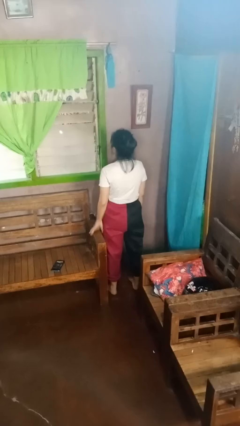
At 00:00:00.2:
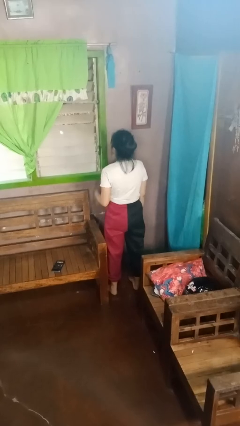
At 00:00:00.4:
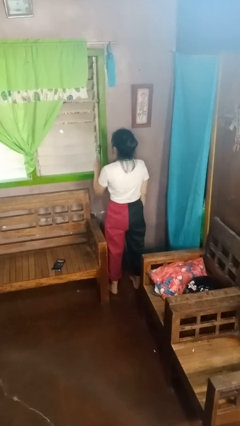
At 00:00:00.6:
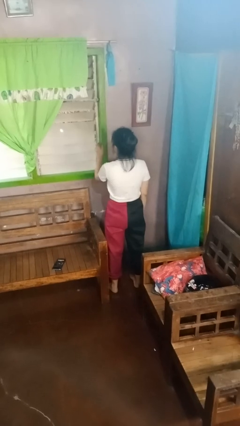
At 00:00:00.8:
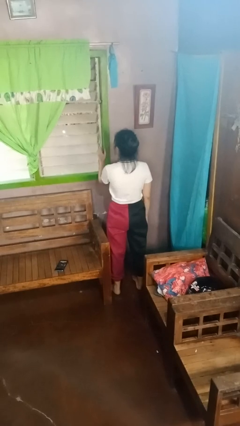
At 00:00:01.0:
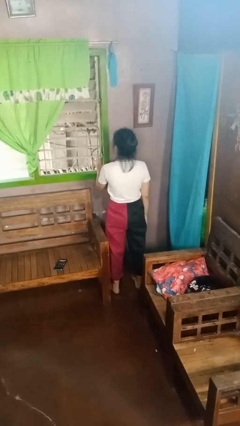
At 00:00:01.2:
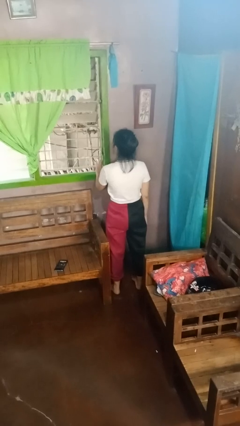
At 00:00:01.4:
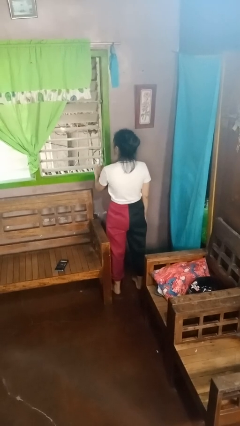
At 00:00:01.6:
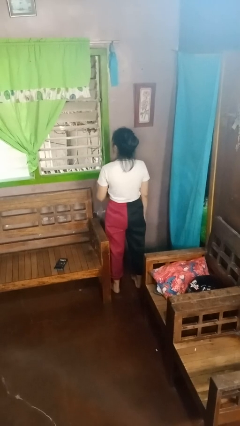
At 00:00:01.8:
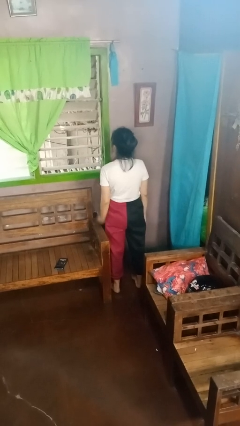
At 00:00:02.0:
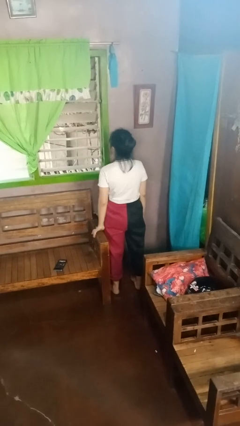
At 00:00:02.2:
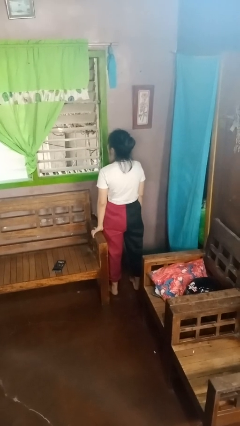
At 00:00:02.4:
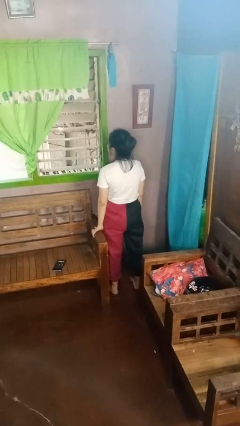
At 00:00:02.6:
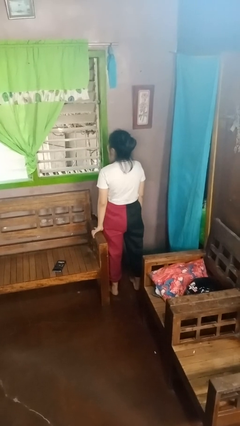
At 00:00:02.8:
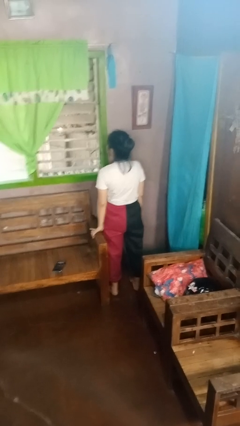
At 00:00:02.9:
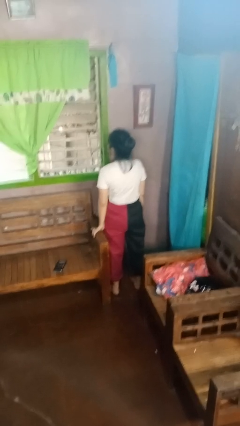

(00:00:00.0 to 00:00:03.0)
person opens home window

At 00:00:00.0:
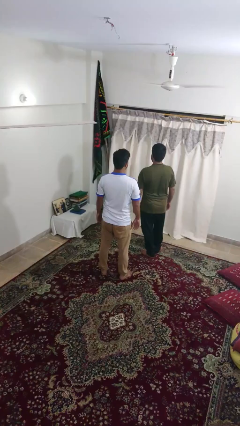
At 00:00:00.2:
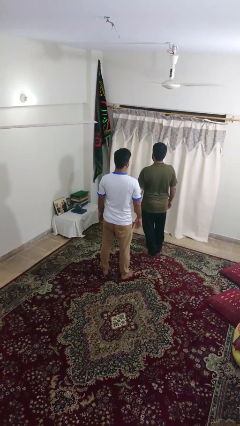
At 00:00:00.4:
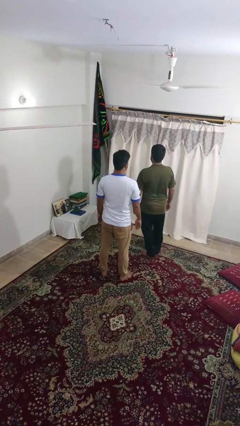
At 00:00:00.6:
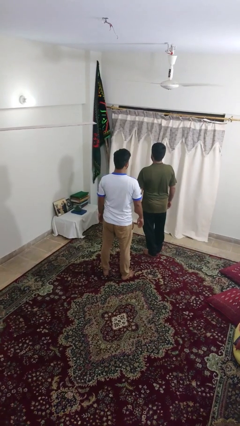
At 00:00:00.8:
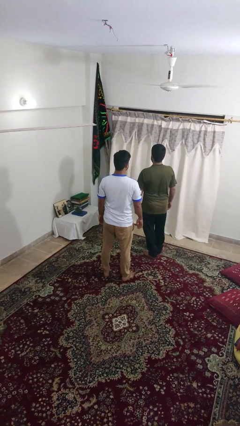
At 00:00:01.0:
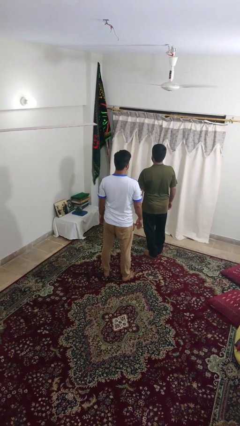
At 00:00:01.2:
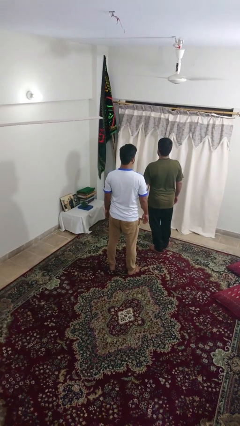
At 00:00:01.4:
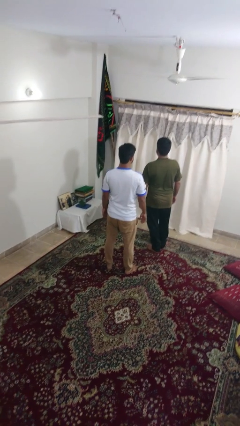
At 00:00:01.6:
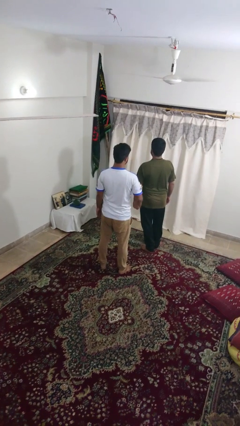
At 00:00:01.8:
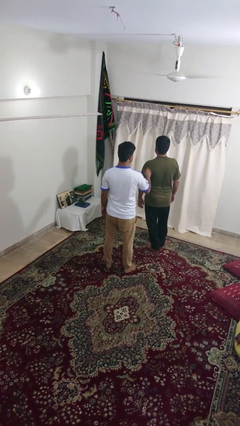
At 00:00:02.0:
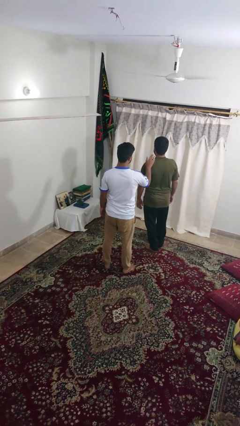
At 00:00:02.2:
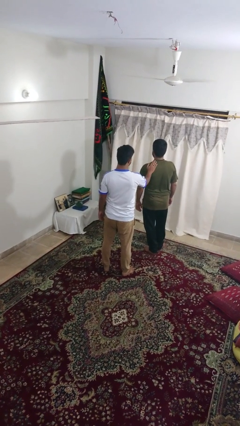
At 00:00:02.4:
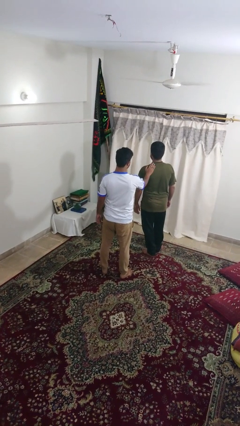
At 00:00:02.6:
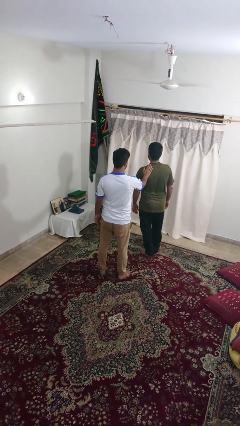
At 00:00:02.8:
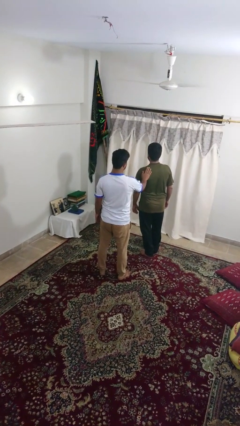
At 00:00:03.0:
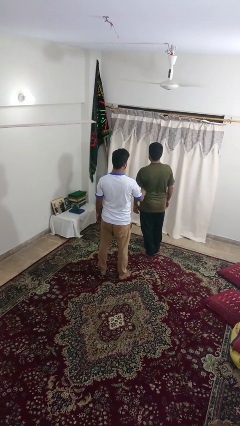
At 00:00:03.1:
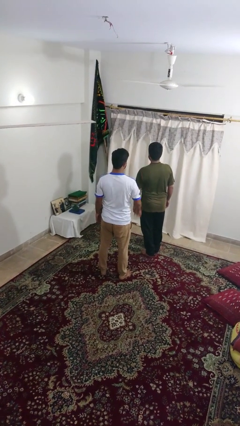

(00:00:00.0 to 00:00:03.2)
person touches back of person

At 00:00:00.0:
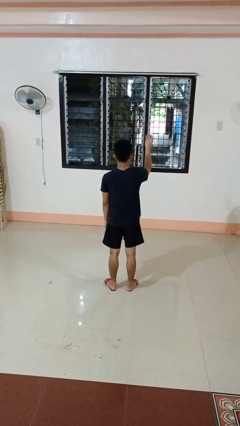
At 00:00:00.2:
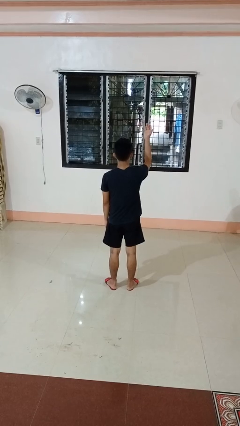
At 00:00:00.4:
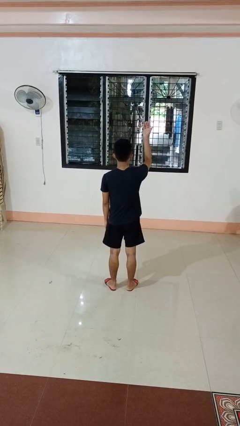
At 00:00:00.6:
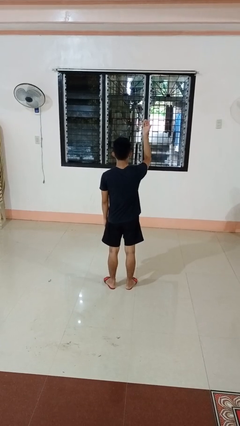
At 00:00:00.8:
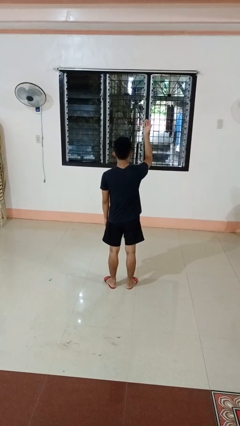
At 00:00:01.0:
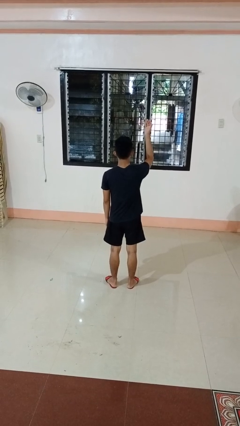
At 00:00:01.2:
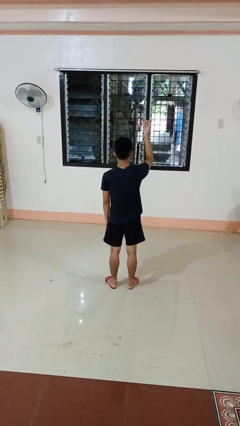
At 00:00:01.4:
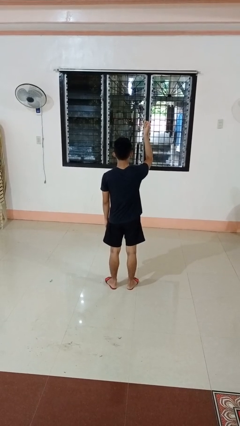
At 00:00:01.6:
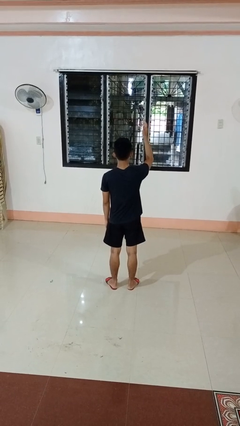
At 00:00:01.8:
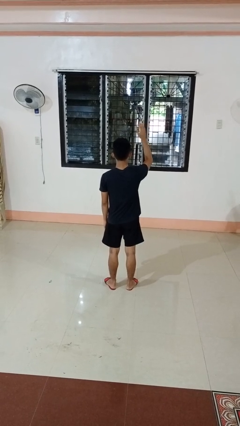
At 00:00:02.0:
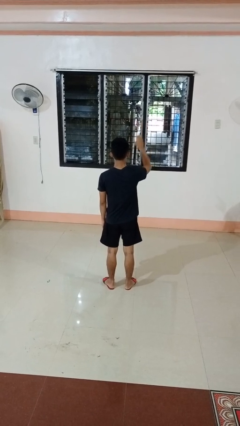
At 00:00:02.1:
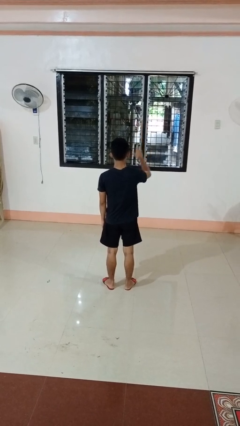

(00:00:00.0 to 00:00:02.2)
person gestures swipe up

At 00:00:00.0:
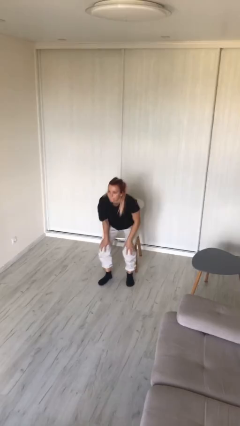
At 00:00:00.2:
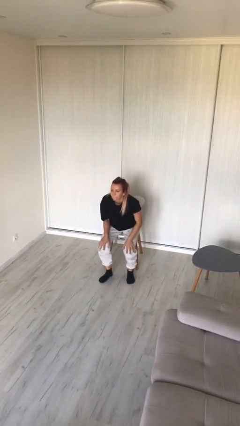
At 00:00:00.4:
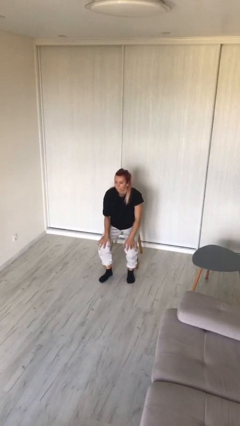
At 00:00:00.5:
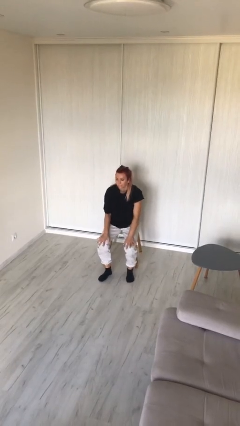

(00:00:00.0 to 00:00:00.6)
person sits down

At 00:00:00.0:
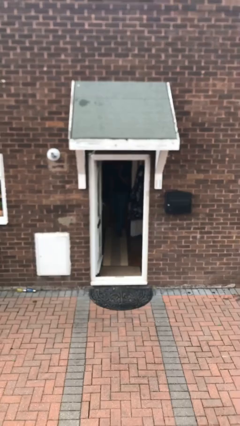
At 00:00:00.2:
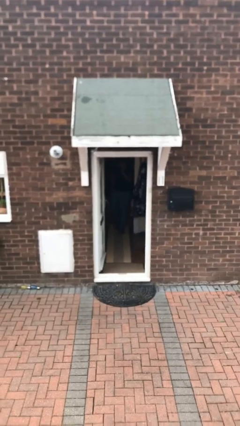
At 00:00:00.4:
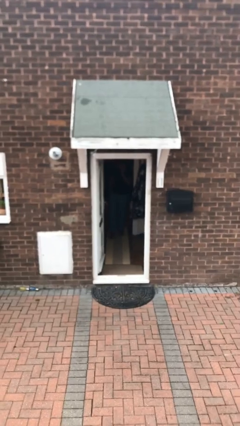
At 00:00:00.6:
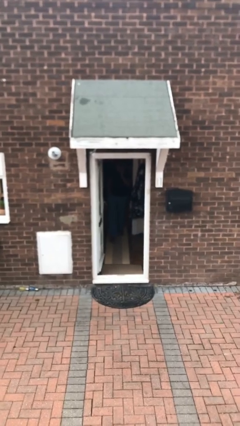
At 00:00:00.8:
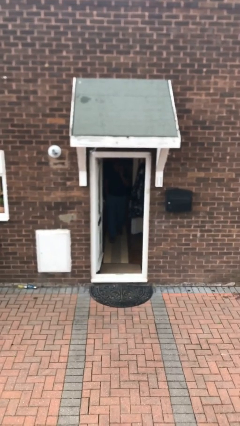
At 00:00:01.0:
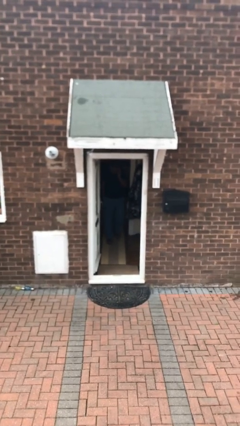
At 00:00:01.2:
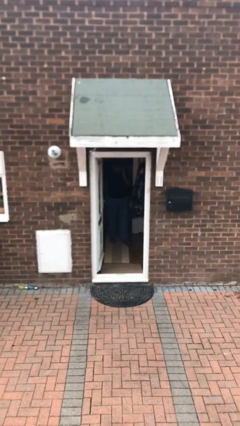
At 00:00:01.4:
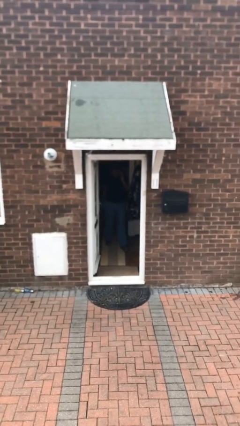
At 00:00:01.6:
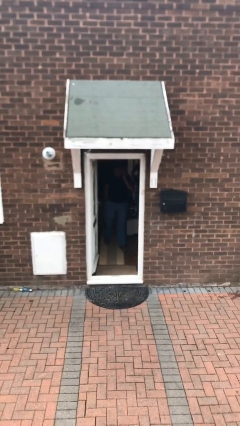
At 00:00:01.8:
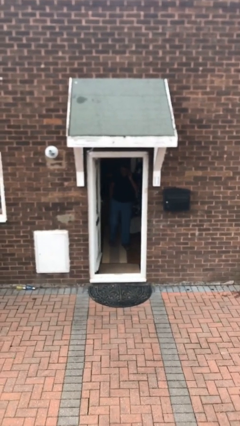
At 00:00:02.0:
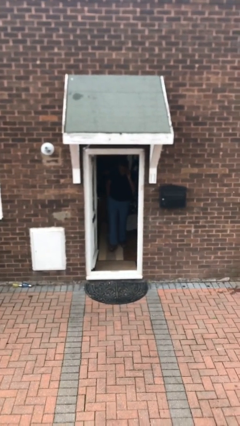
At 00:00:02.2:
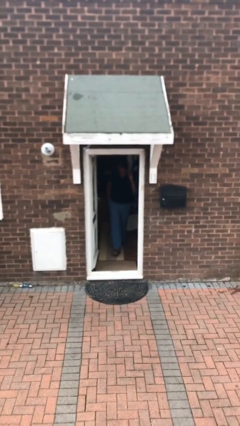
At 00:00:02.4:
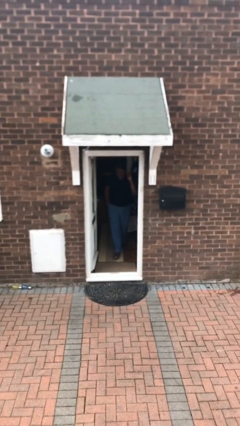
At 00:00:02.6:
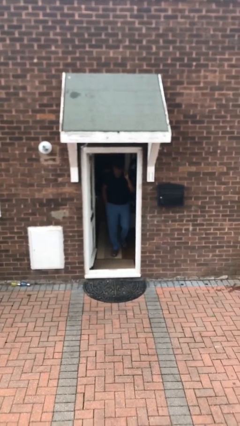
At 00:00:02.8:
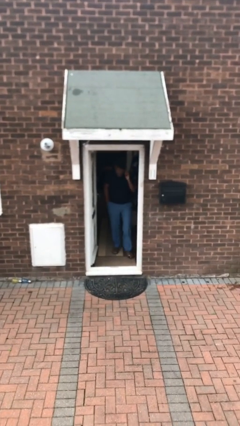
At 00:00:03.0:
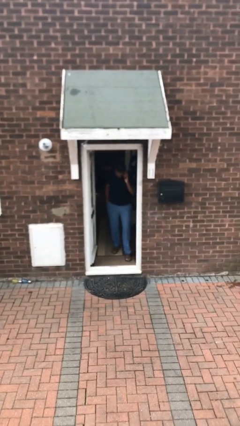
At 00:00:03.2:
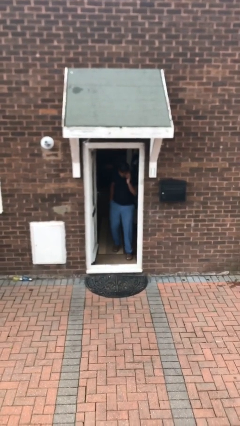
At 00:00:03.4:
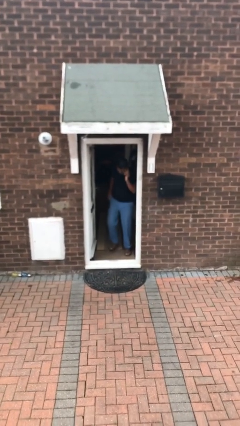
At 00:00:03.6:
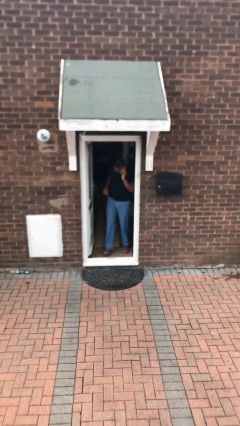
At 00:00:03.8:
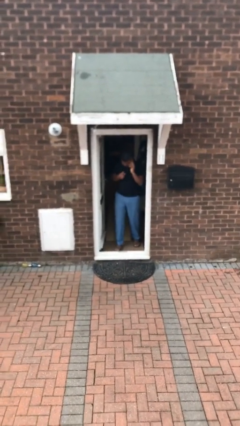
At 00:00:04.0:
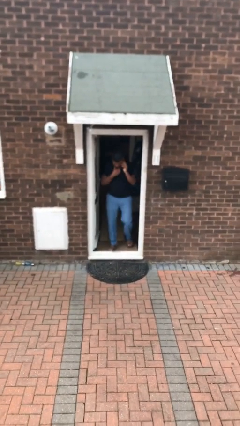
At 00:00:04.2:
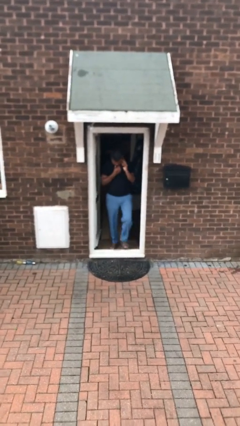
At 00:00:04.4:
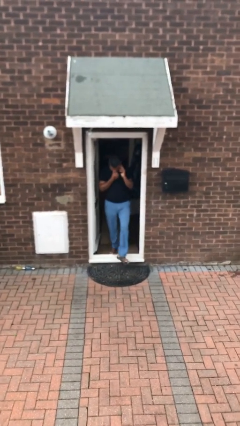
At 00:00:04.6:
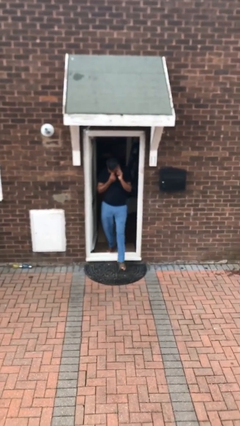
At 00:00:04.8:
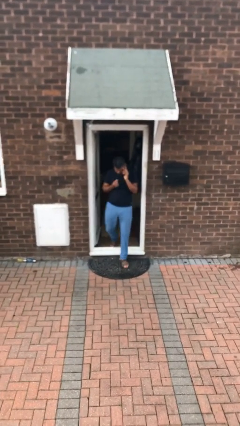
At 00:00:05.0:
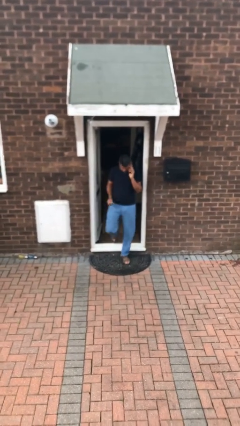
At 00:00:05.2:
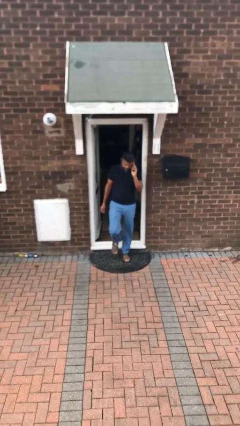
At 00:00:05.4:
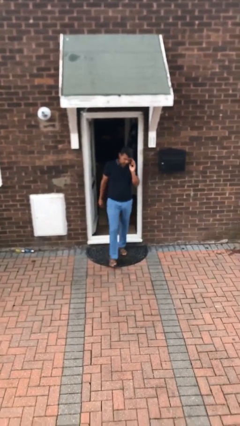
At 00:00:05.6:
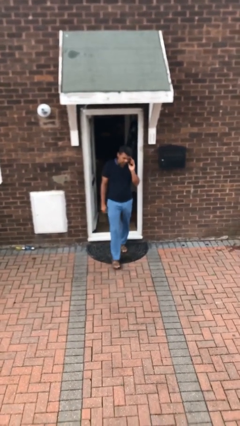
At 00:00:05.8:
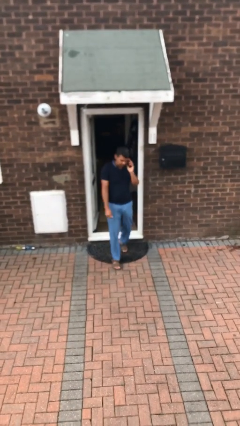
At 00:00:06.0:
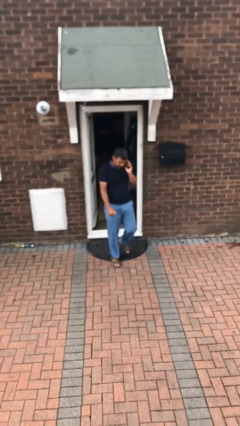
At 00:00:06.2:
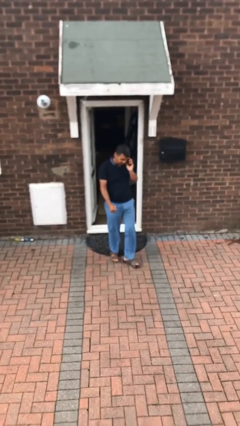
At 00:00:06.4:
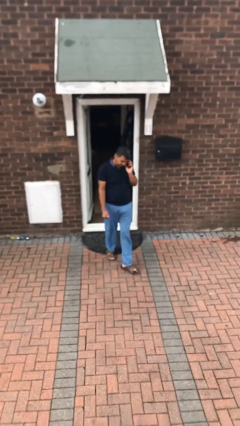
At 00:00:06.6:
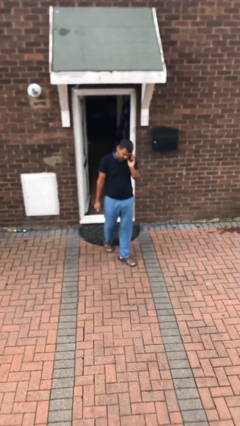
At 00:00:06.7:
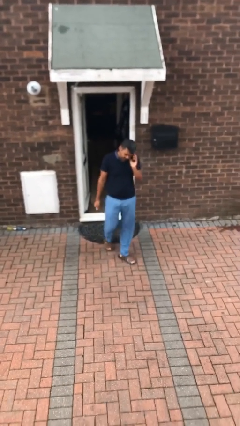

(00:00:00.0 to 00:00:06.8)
person enters scene through structure

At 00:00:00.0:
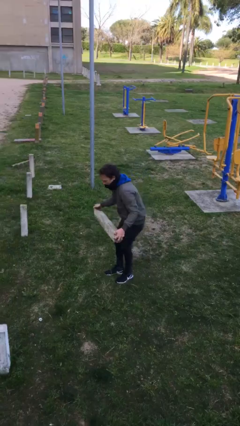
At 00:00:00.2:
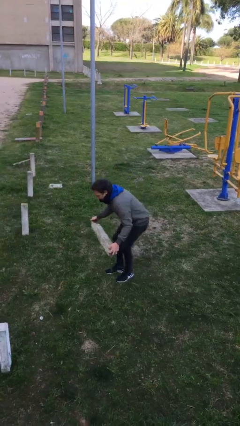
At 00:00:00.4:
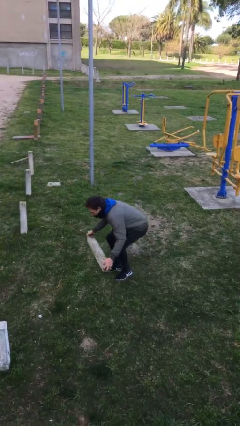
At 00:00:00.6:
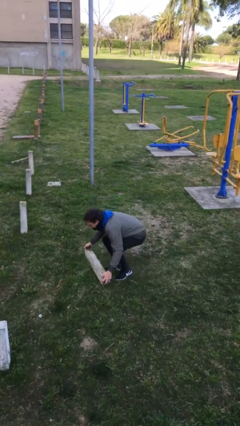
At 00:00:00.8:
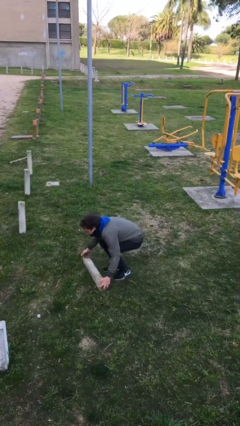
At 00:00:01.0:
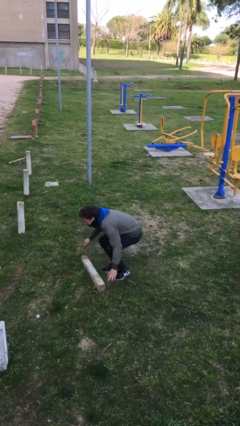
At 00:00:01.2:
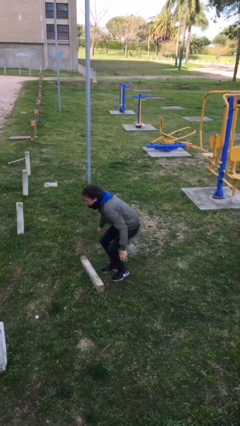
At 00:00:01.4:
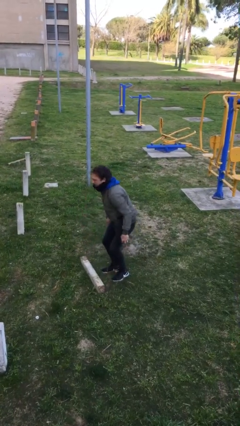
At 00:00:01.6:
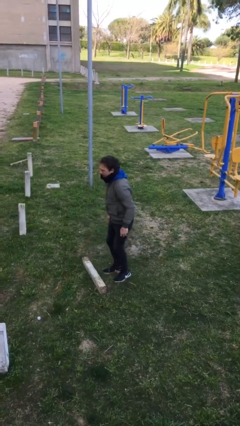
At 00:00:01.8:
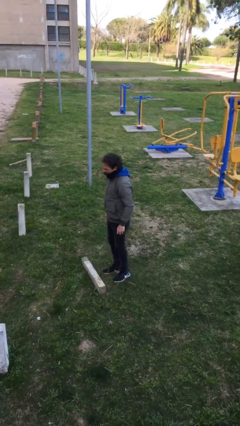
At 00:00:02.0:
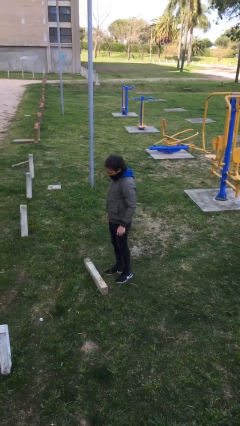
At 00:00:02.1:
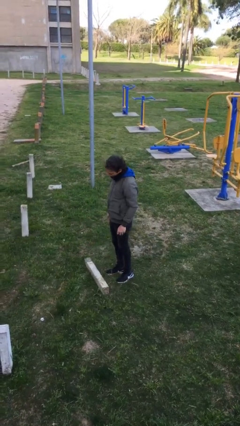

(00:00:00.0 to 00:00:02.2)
person puts down object on floor
